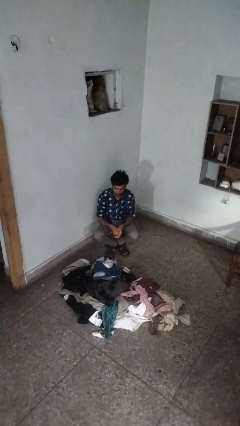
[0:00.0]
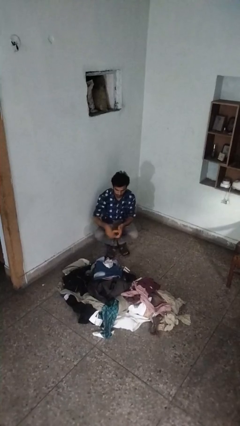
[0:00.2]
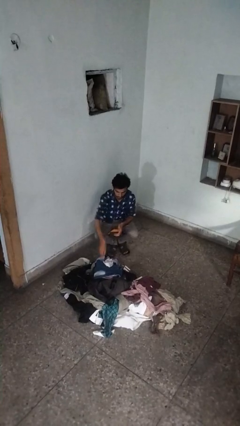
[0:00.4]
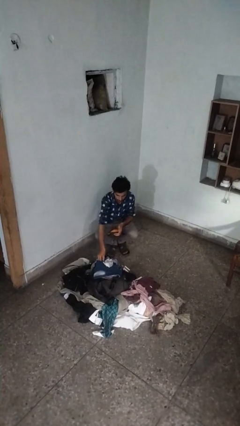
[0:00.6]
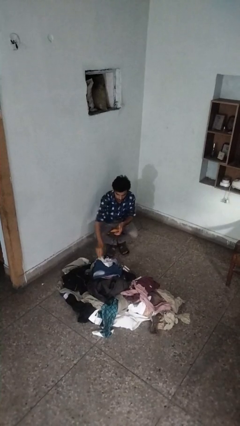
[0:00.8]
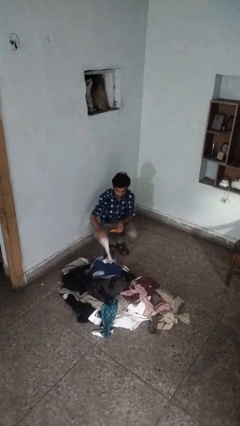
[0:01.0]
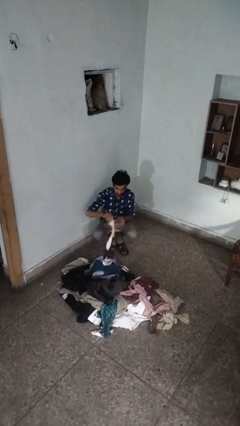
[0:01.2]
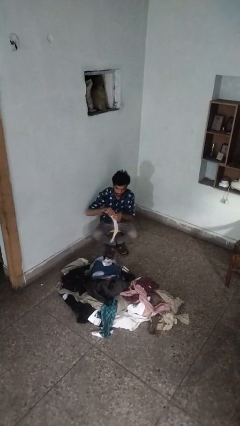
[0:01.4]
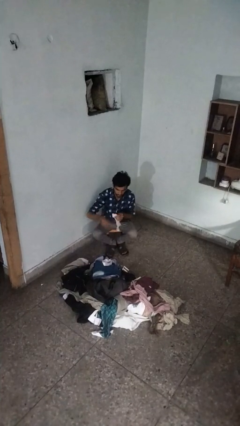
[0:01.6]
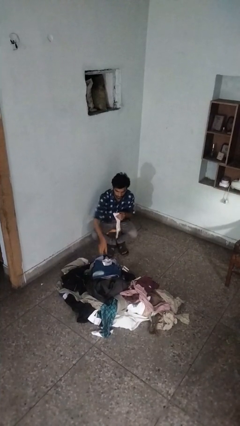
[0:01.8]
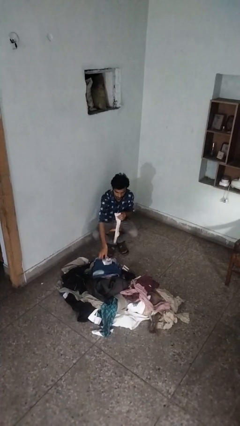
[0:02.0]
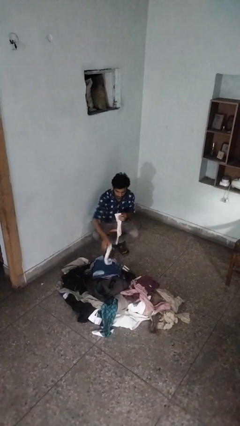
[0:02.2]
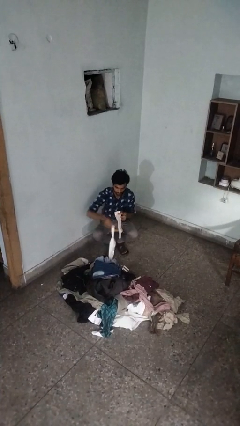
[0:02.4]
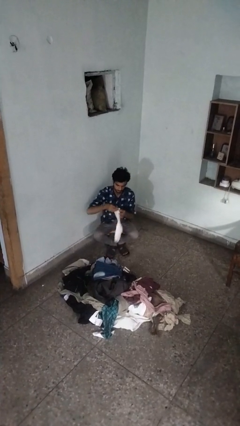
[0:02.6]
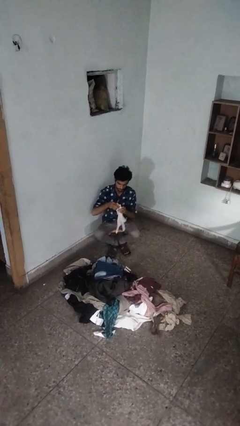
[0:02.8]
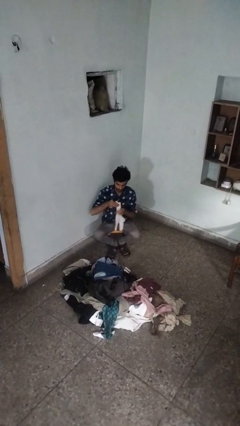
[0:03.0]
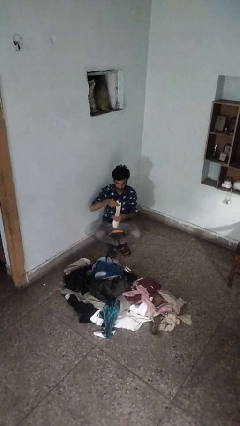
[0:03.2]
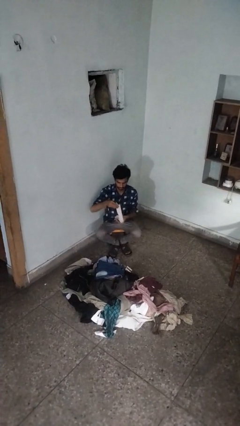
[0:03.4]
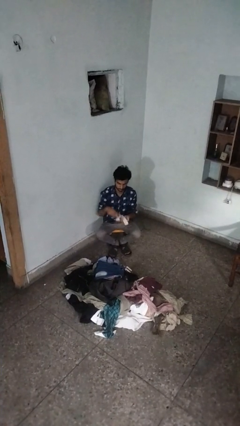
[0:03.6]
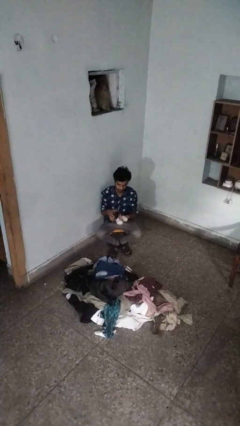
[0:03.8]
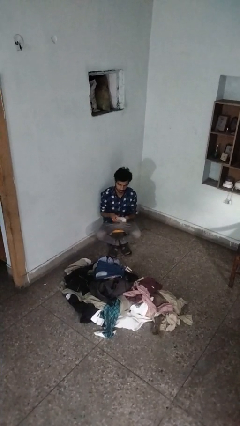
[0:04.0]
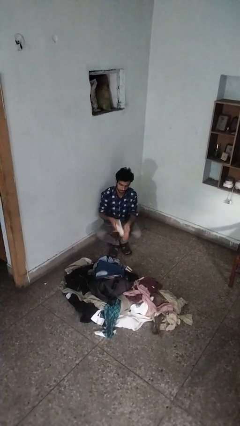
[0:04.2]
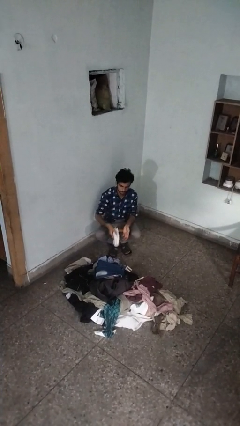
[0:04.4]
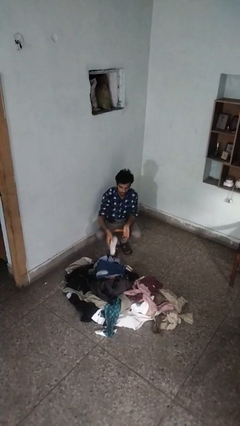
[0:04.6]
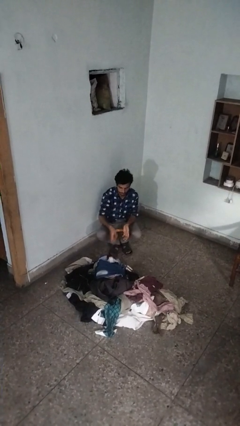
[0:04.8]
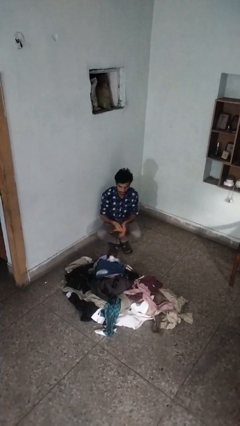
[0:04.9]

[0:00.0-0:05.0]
person folds socks

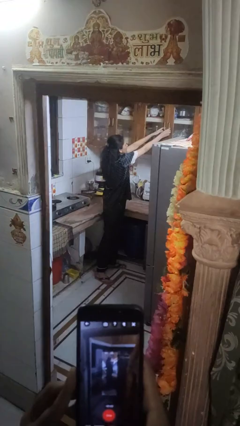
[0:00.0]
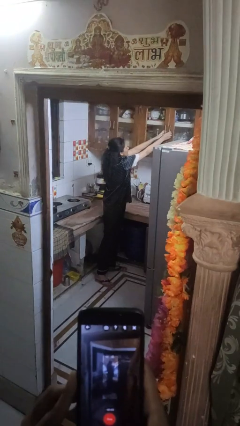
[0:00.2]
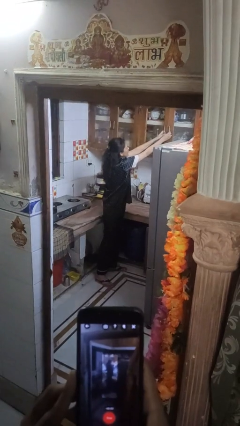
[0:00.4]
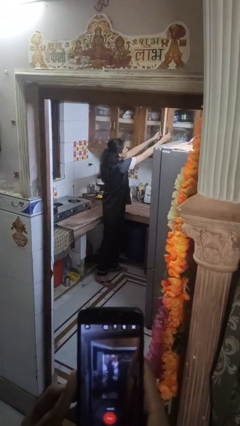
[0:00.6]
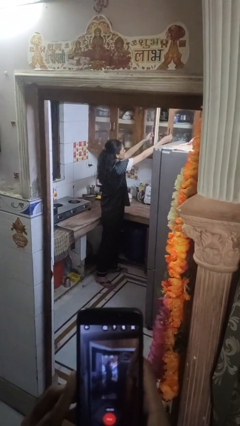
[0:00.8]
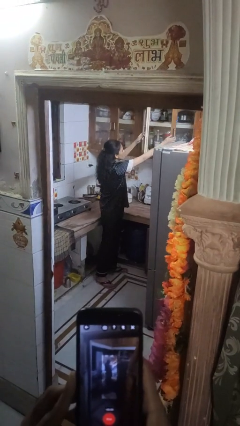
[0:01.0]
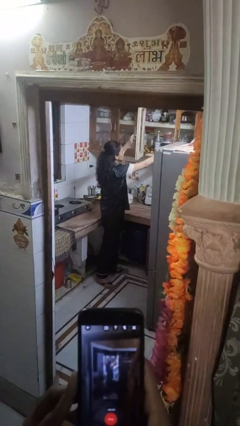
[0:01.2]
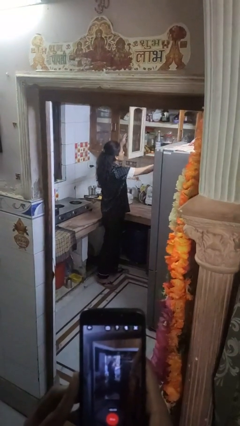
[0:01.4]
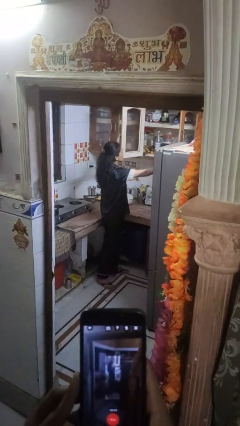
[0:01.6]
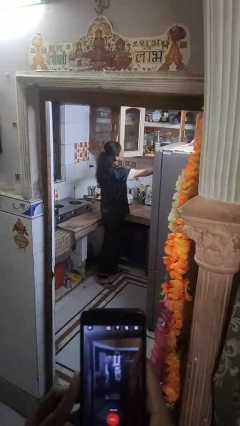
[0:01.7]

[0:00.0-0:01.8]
person opens cabinet

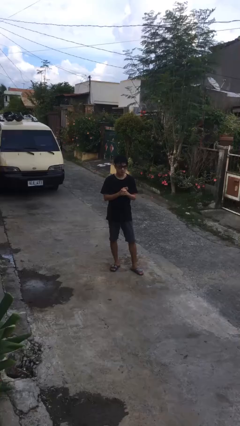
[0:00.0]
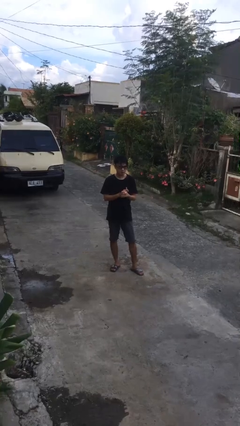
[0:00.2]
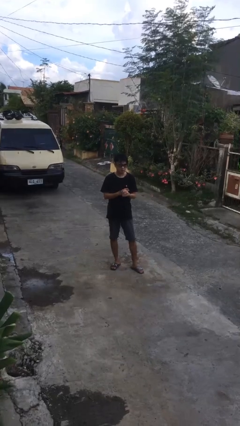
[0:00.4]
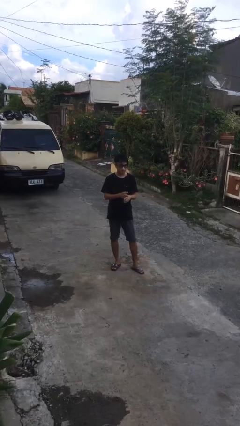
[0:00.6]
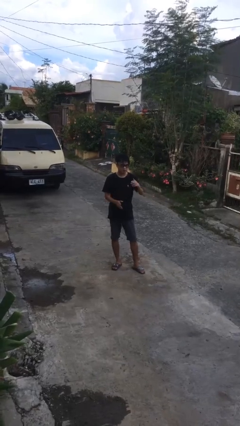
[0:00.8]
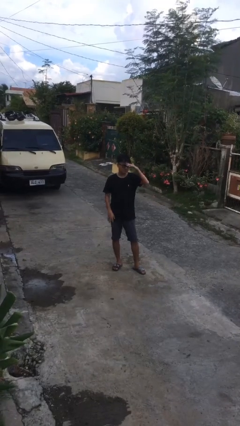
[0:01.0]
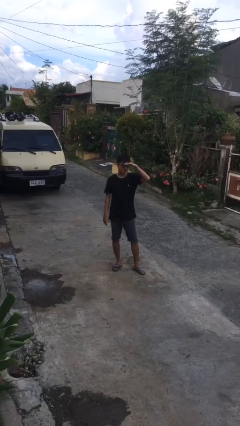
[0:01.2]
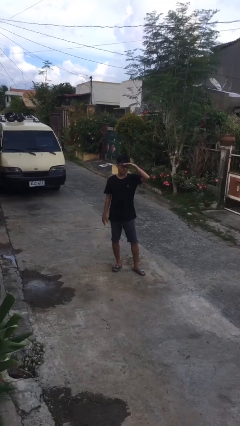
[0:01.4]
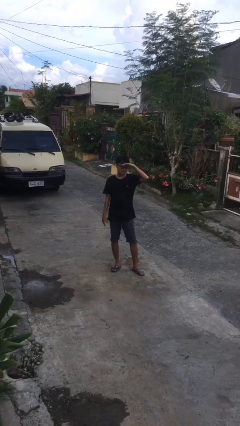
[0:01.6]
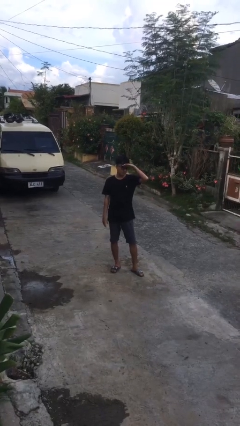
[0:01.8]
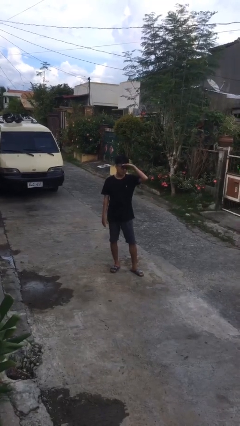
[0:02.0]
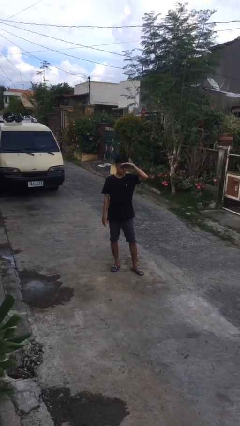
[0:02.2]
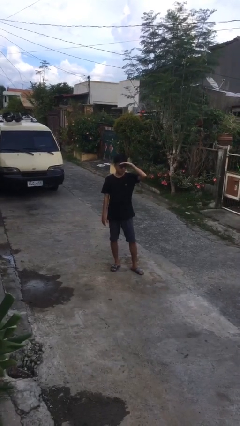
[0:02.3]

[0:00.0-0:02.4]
person shades eyes

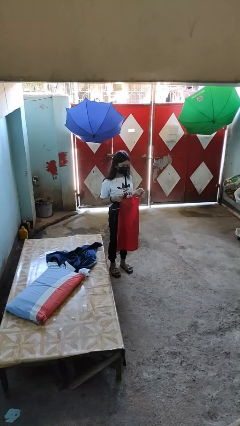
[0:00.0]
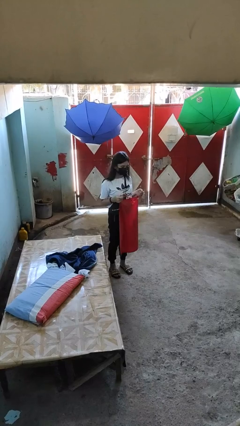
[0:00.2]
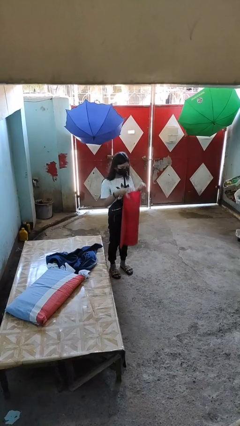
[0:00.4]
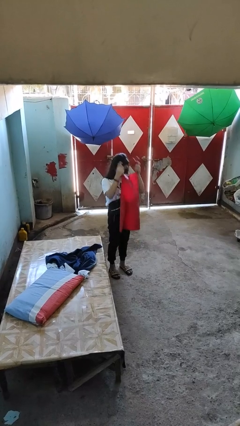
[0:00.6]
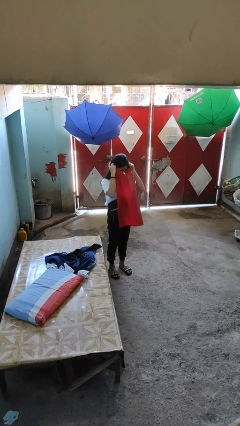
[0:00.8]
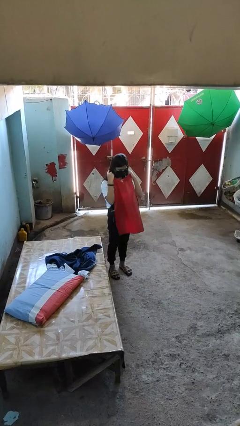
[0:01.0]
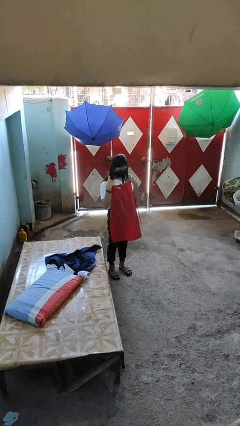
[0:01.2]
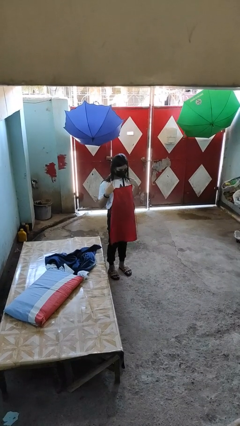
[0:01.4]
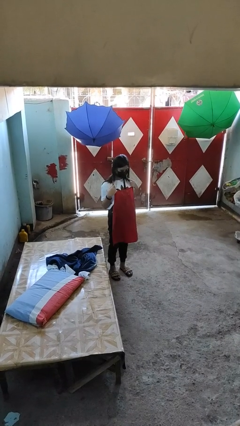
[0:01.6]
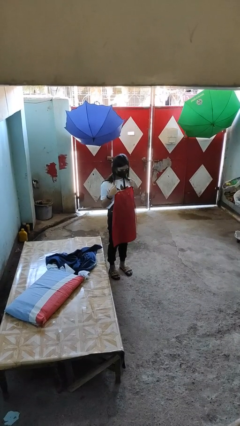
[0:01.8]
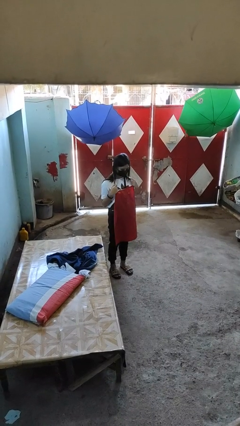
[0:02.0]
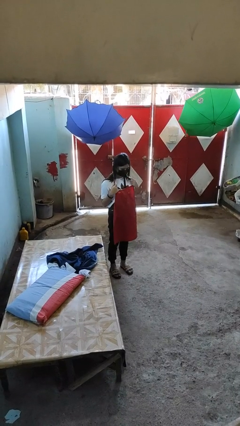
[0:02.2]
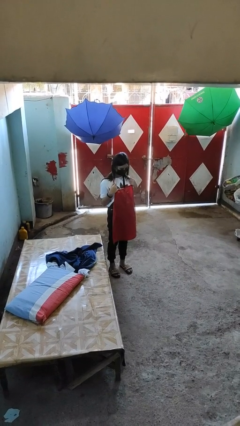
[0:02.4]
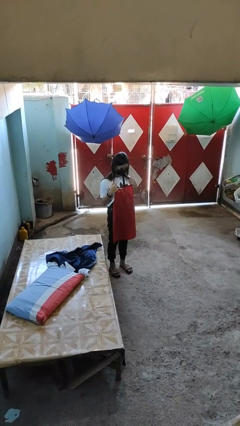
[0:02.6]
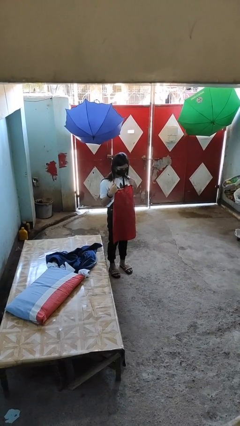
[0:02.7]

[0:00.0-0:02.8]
person puts on apron

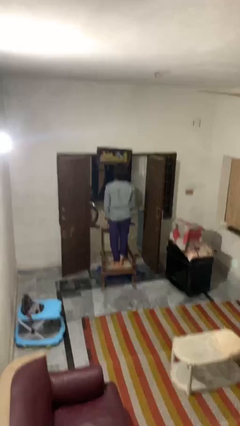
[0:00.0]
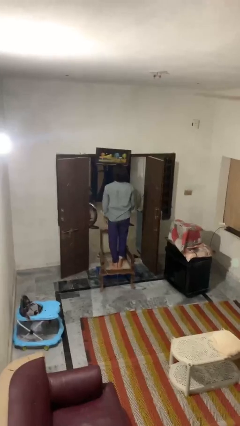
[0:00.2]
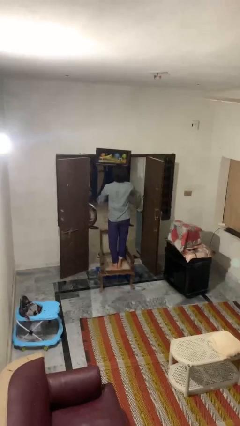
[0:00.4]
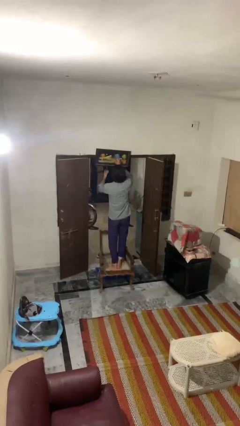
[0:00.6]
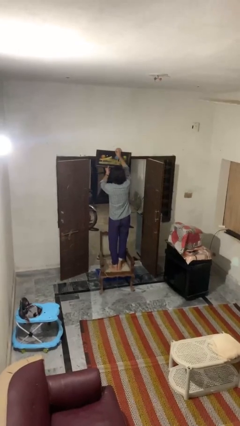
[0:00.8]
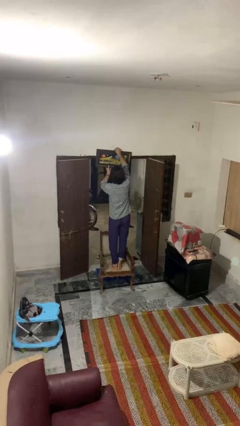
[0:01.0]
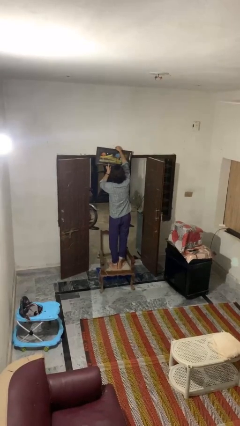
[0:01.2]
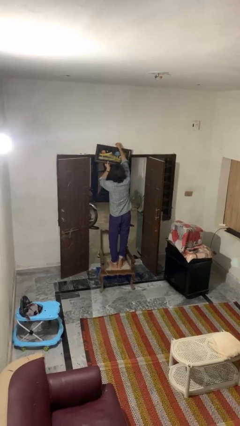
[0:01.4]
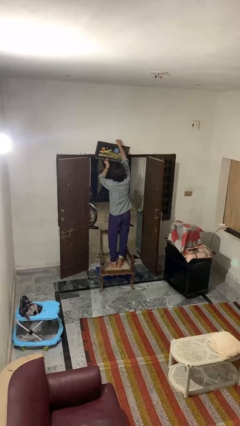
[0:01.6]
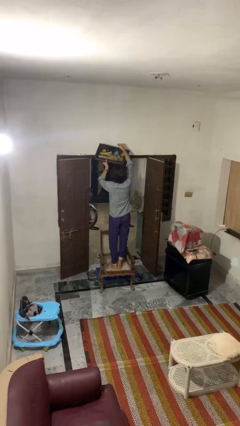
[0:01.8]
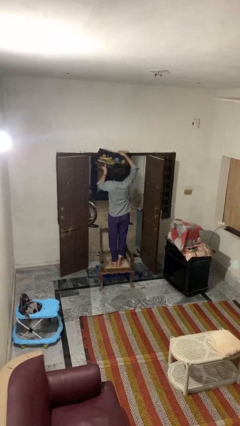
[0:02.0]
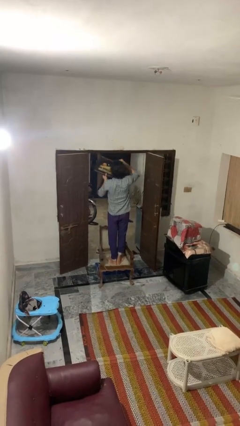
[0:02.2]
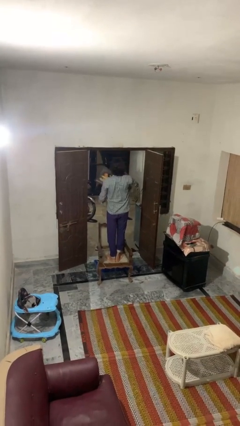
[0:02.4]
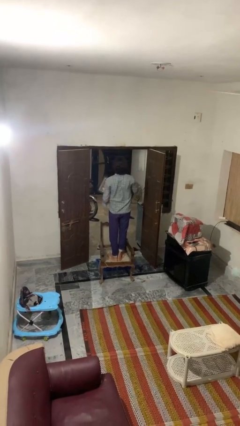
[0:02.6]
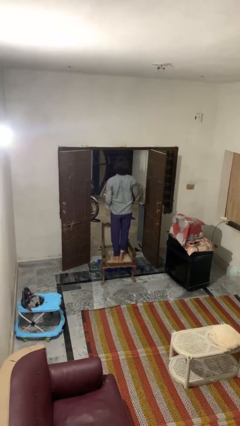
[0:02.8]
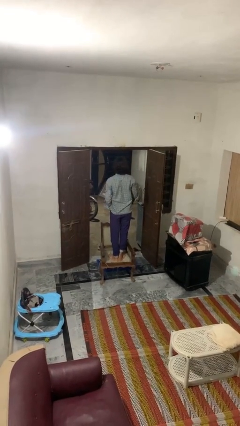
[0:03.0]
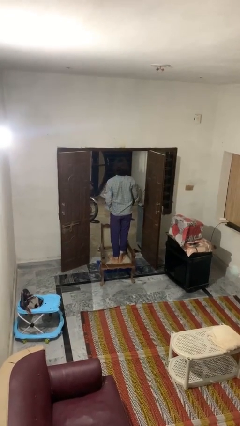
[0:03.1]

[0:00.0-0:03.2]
person takes down picture frame

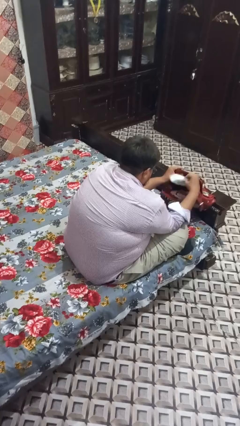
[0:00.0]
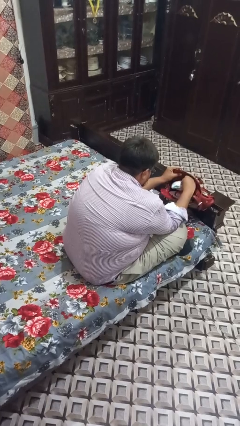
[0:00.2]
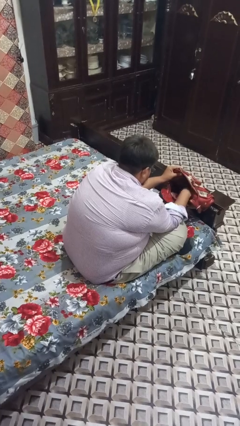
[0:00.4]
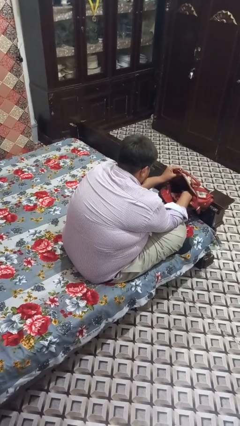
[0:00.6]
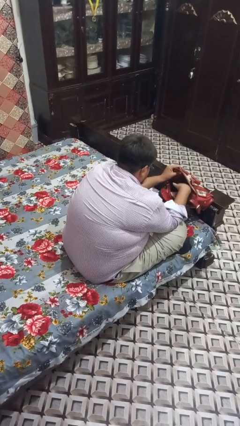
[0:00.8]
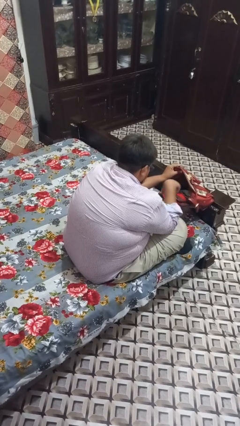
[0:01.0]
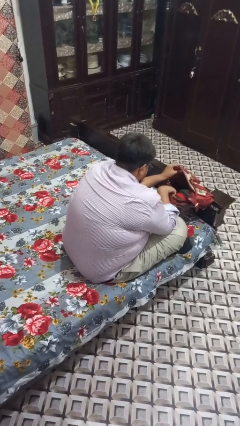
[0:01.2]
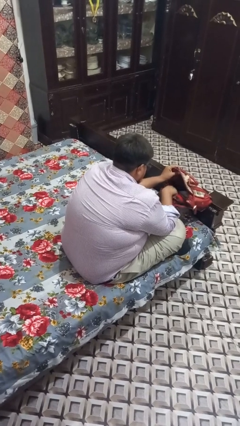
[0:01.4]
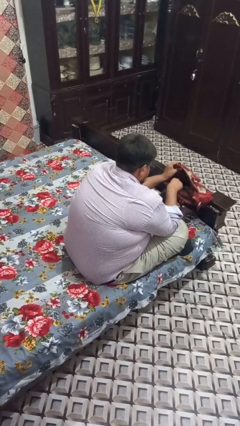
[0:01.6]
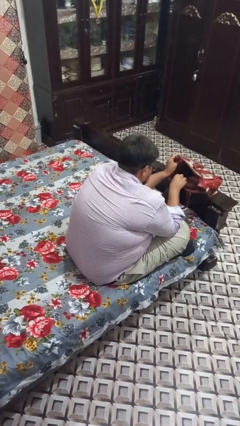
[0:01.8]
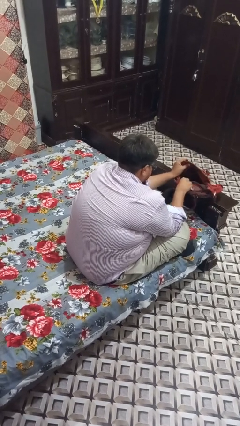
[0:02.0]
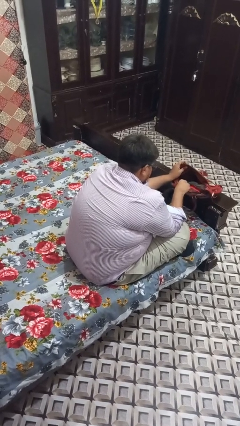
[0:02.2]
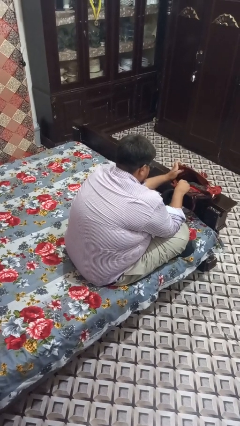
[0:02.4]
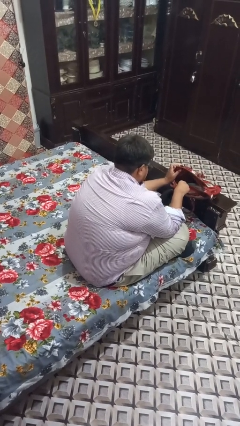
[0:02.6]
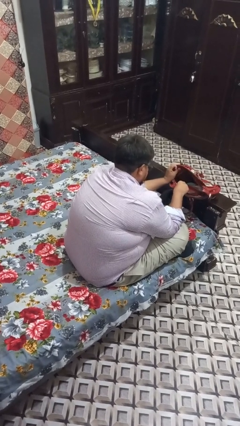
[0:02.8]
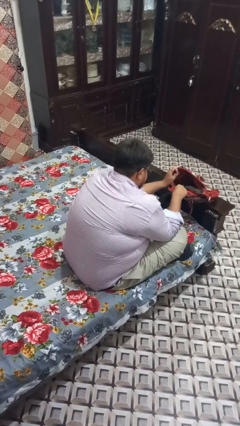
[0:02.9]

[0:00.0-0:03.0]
person puts object into purse
